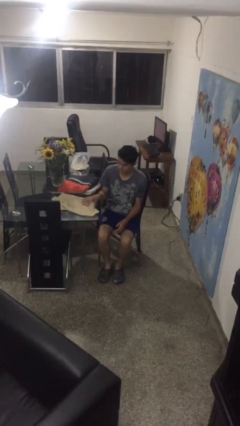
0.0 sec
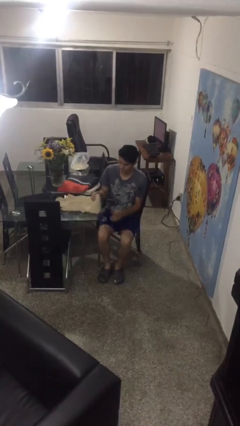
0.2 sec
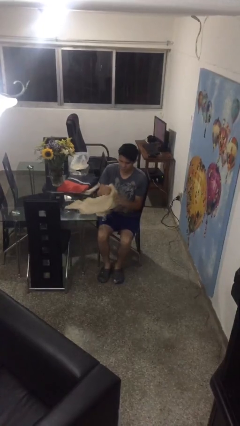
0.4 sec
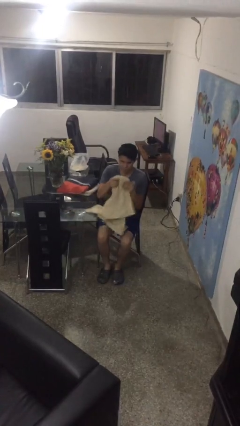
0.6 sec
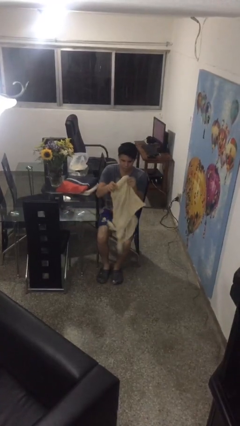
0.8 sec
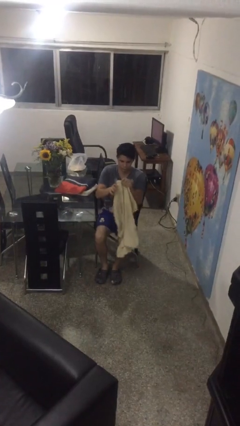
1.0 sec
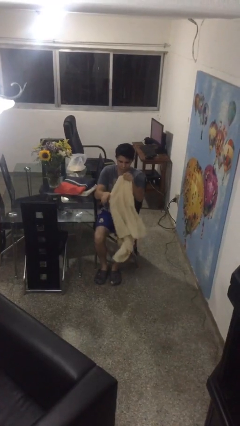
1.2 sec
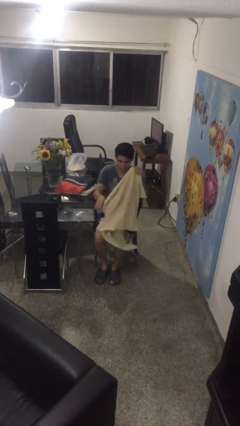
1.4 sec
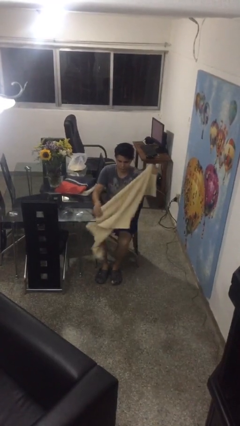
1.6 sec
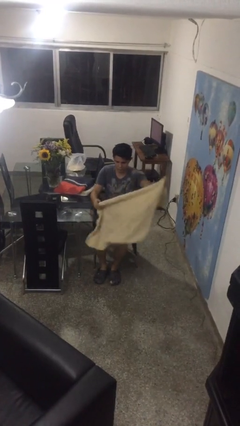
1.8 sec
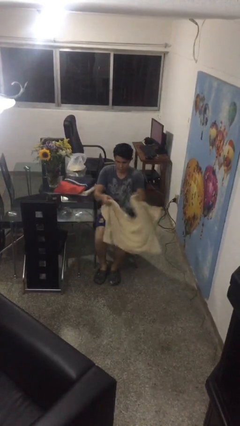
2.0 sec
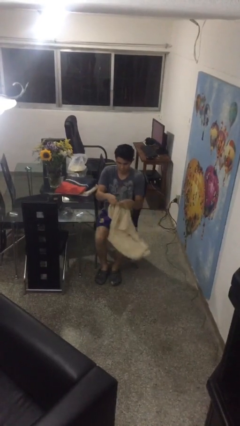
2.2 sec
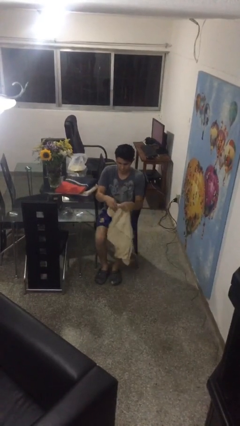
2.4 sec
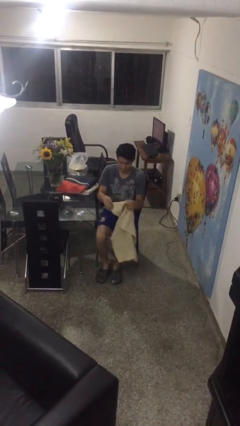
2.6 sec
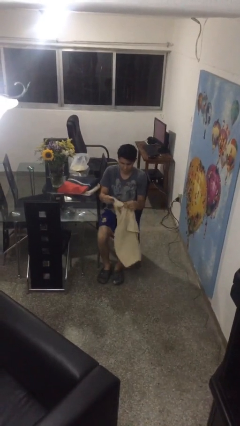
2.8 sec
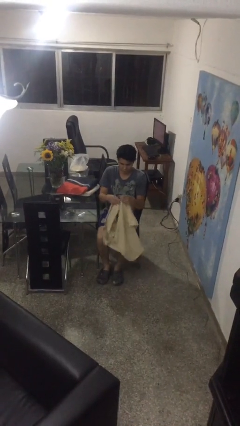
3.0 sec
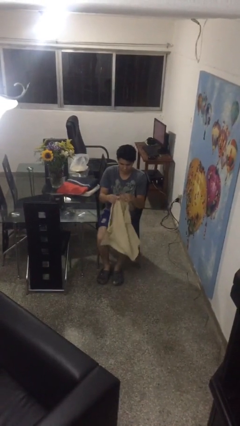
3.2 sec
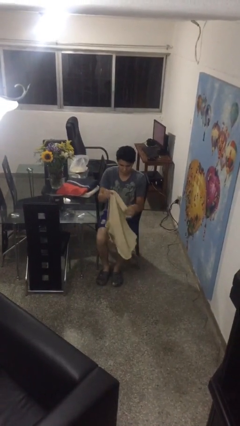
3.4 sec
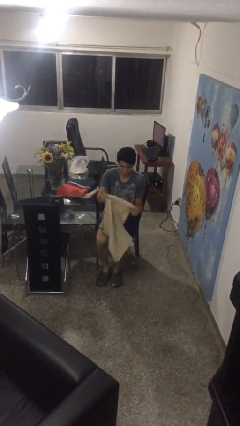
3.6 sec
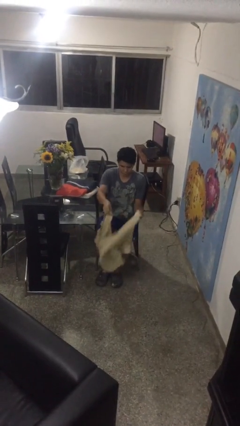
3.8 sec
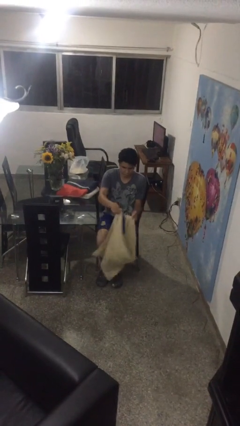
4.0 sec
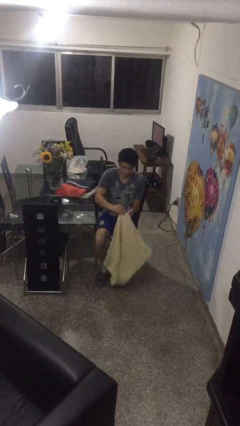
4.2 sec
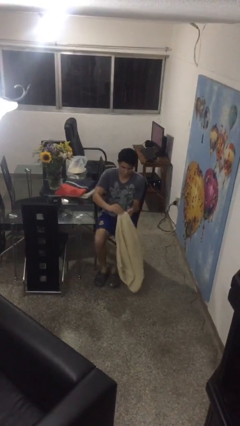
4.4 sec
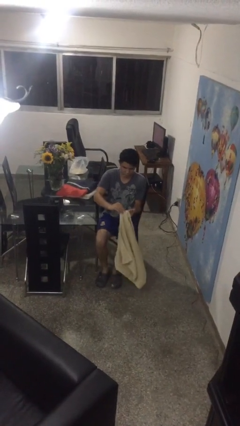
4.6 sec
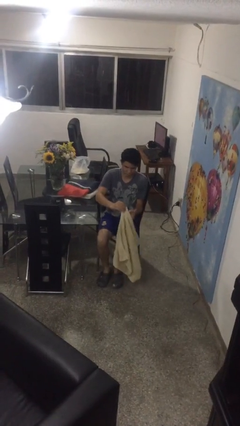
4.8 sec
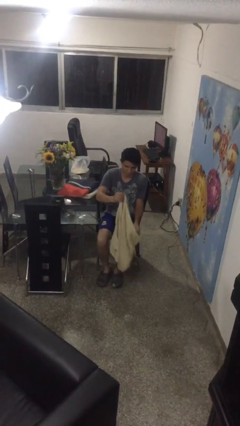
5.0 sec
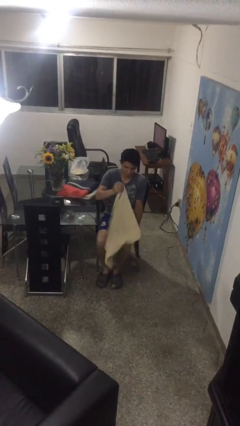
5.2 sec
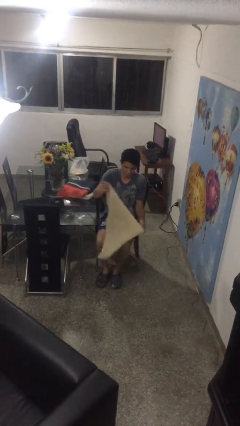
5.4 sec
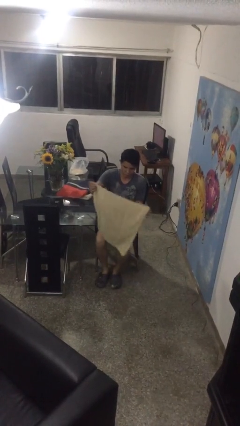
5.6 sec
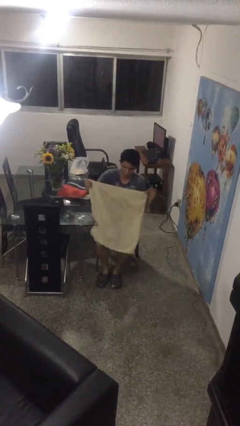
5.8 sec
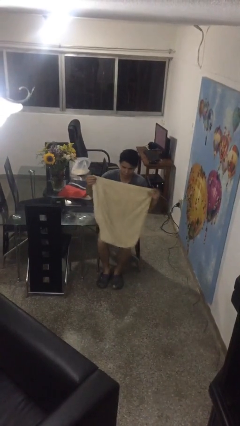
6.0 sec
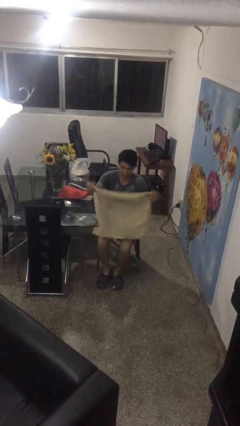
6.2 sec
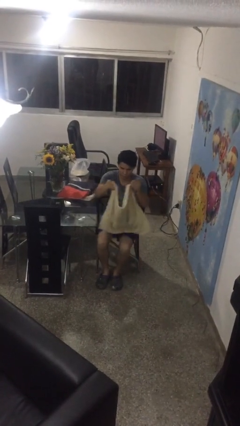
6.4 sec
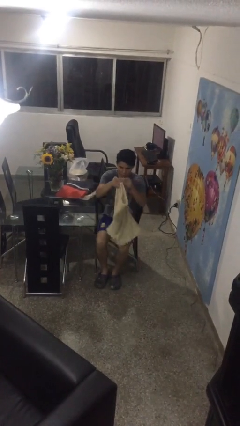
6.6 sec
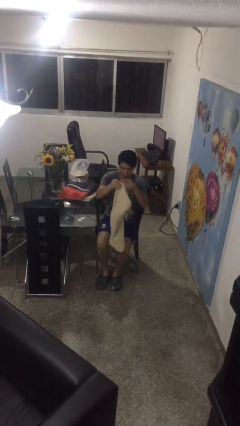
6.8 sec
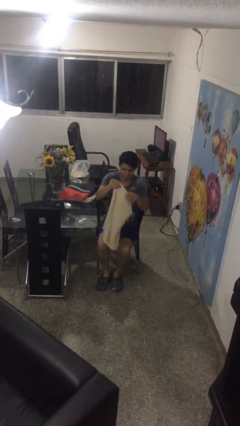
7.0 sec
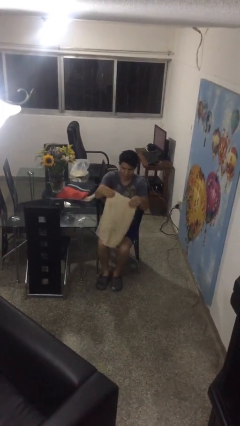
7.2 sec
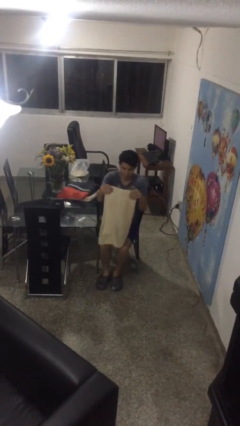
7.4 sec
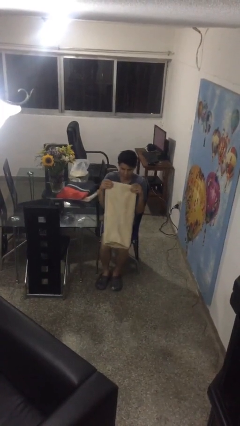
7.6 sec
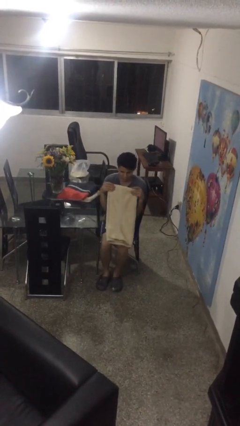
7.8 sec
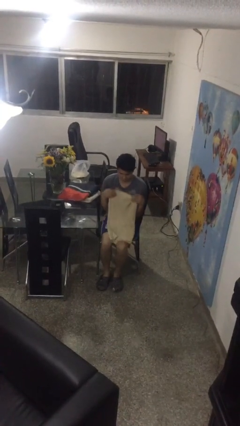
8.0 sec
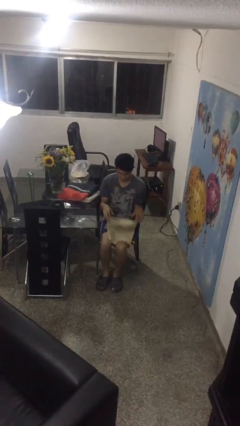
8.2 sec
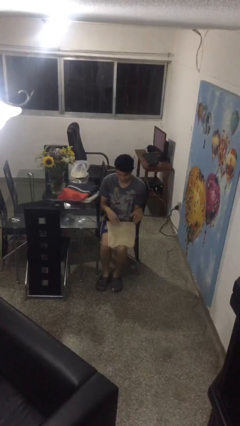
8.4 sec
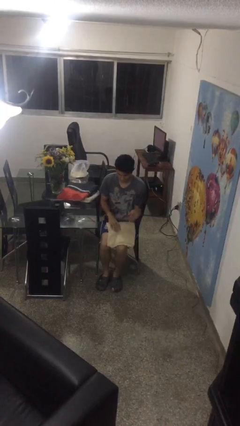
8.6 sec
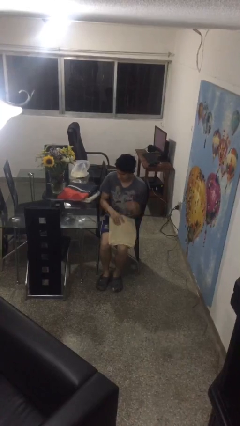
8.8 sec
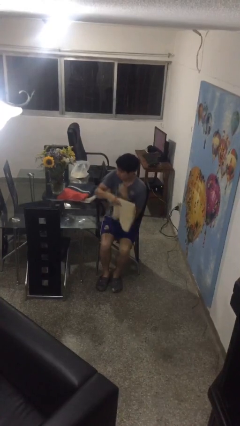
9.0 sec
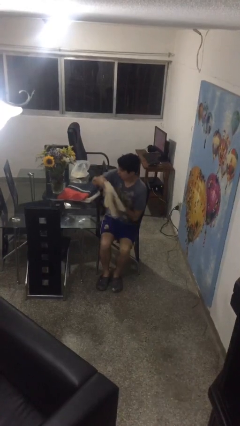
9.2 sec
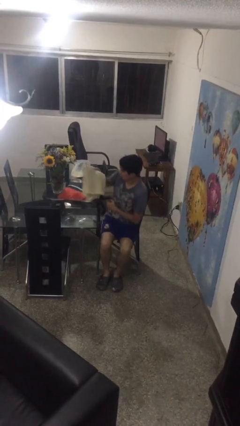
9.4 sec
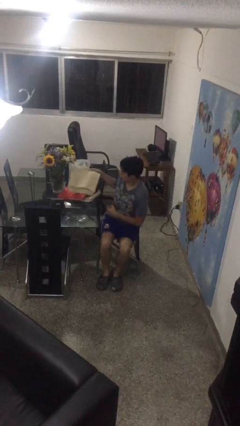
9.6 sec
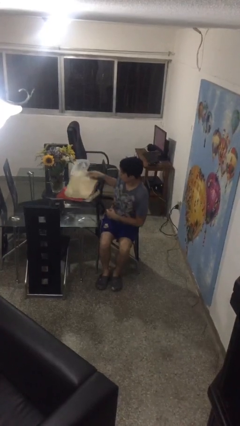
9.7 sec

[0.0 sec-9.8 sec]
person folds towel

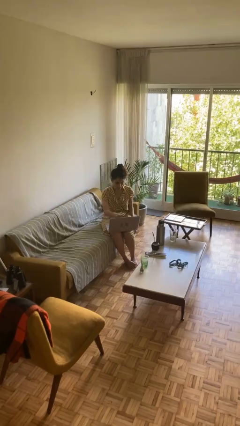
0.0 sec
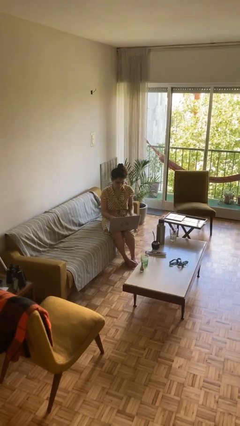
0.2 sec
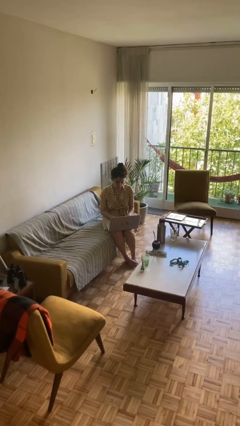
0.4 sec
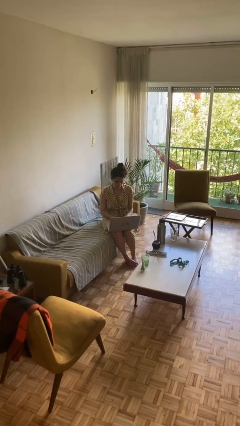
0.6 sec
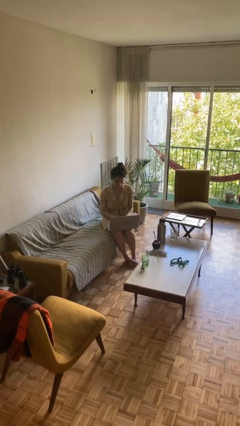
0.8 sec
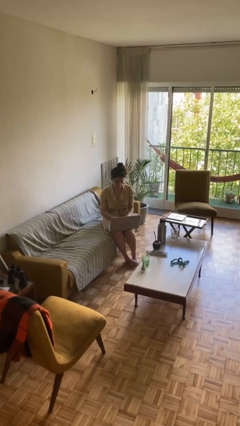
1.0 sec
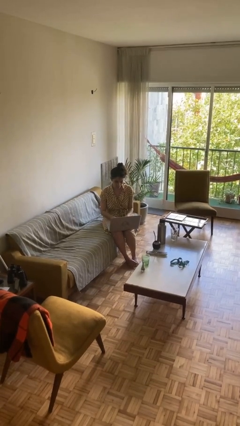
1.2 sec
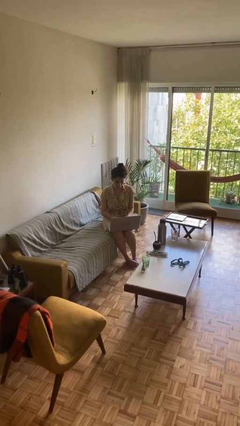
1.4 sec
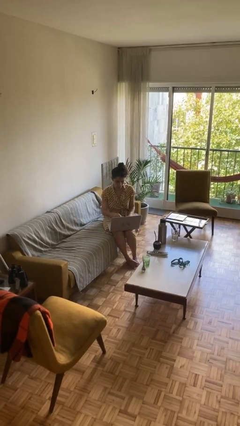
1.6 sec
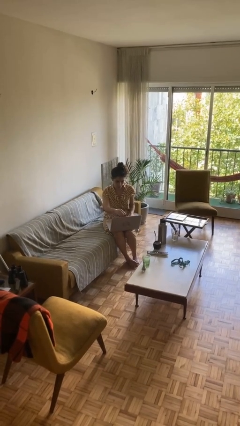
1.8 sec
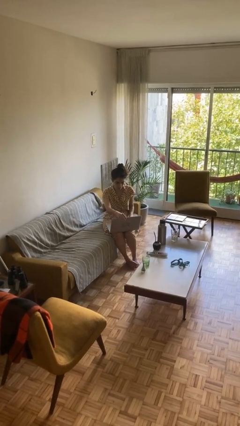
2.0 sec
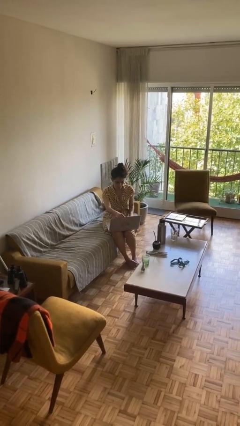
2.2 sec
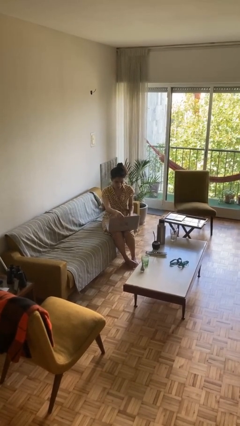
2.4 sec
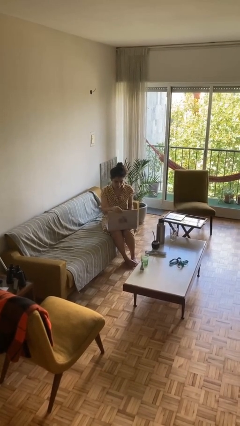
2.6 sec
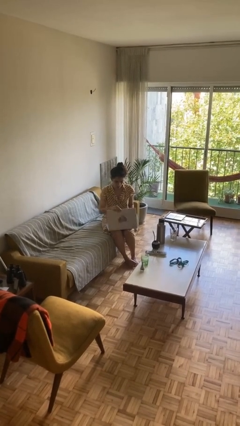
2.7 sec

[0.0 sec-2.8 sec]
person interacts with laptop

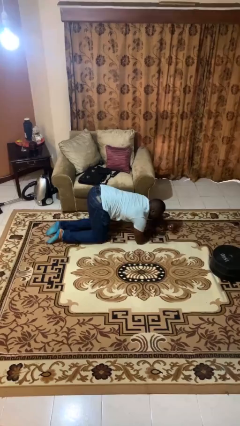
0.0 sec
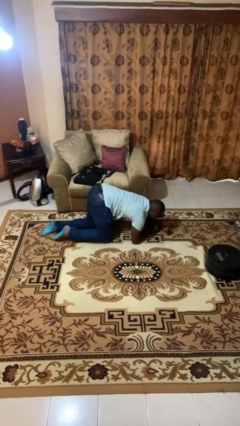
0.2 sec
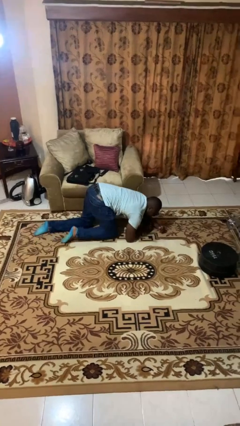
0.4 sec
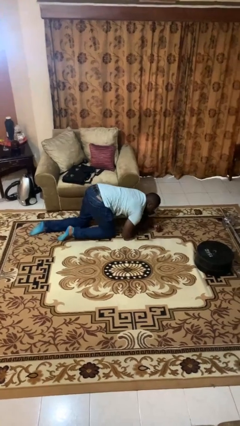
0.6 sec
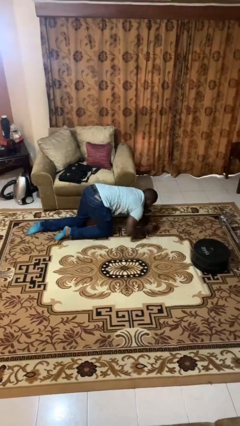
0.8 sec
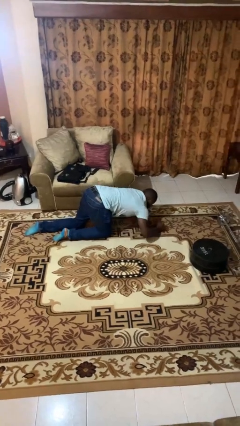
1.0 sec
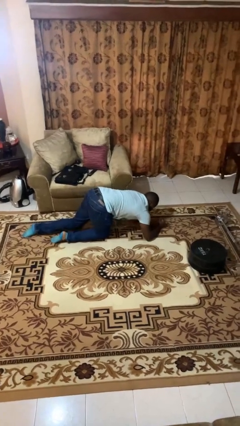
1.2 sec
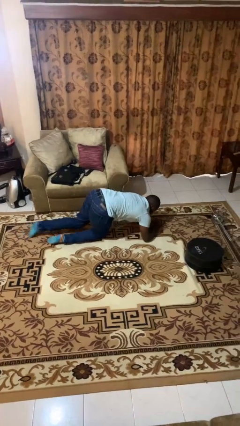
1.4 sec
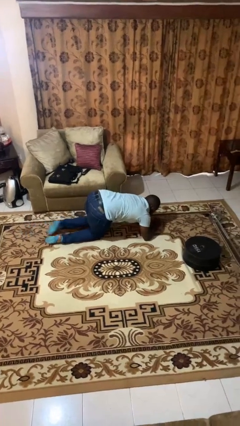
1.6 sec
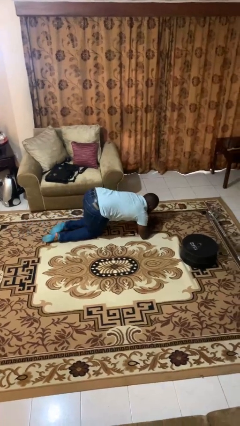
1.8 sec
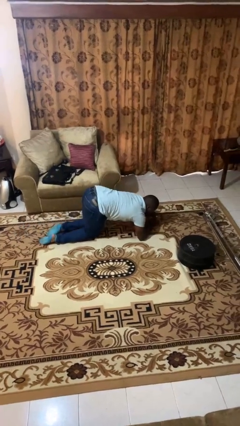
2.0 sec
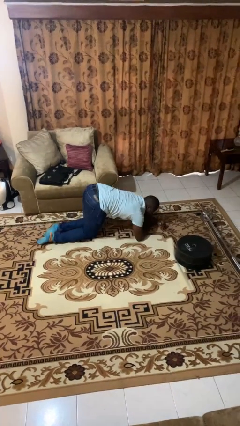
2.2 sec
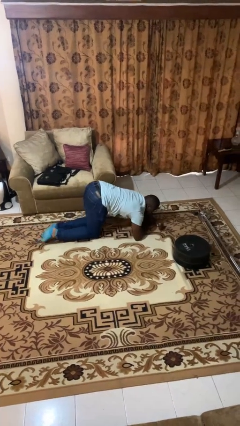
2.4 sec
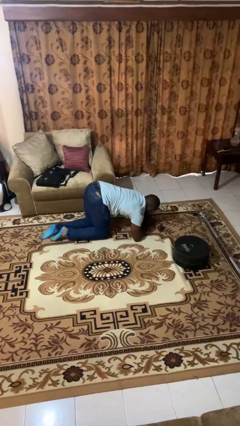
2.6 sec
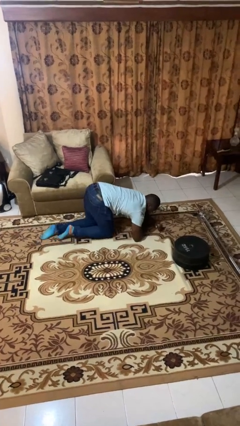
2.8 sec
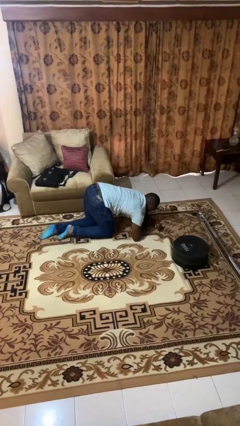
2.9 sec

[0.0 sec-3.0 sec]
person crawls

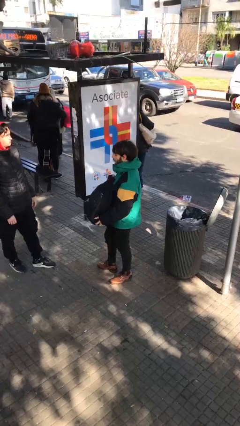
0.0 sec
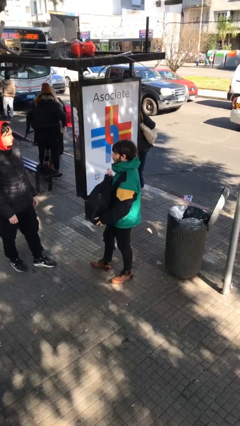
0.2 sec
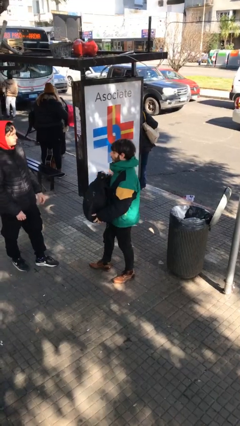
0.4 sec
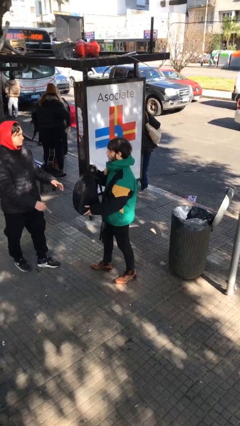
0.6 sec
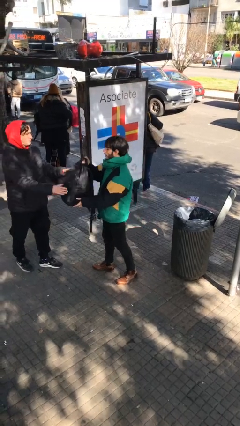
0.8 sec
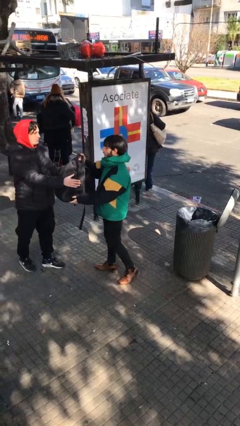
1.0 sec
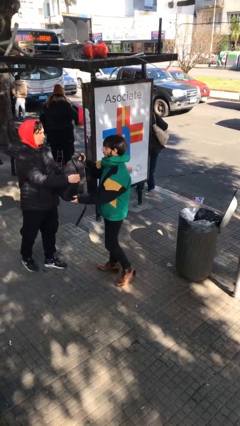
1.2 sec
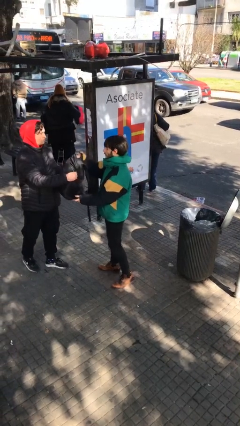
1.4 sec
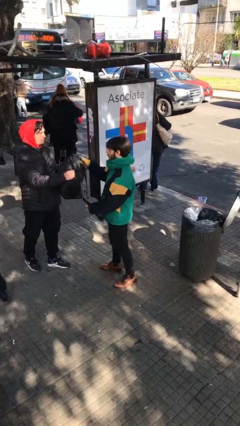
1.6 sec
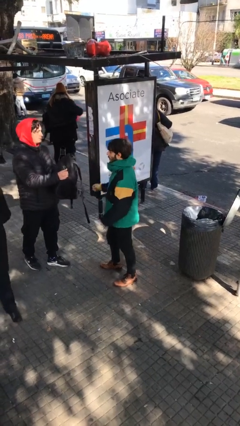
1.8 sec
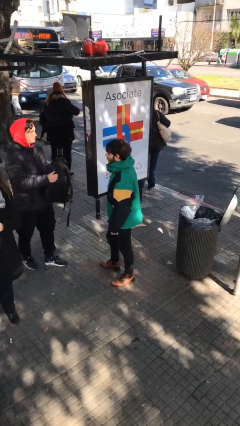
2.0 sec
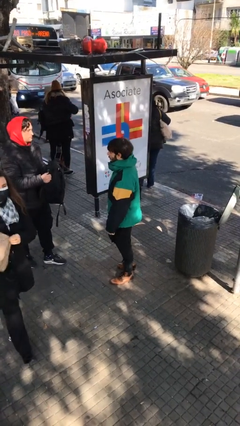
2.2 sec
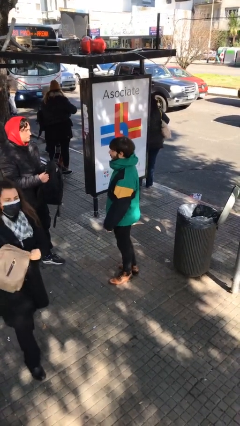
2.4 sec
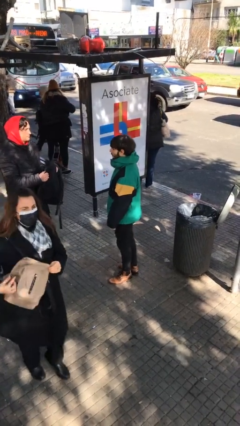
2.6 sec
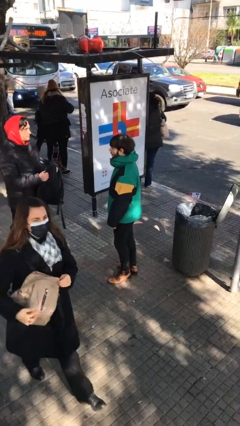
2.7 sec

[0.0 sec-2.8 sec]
person transfers object to person
